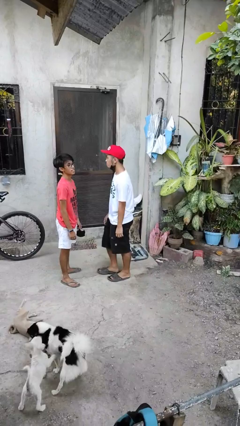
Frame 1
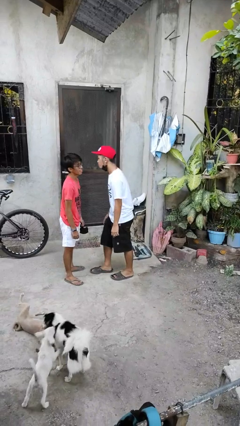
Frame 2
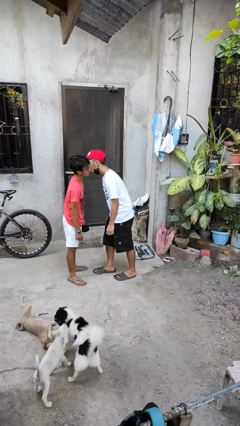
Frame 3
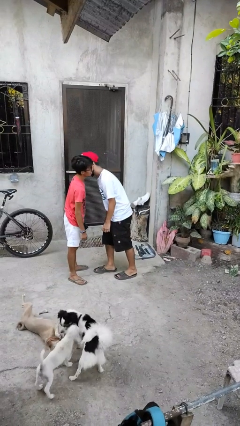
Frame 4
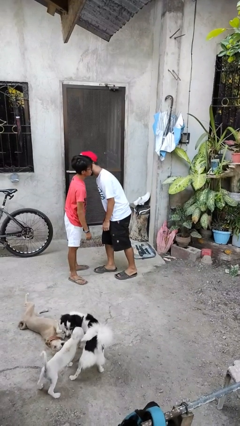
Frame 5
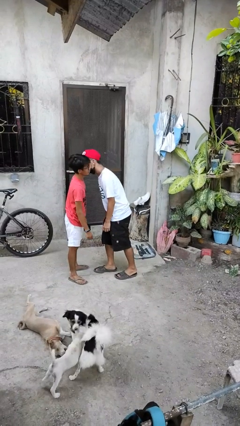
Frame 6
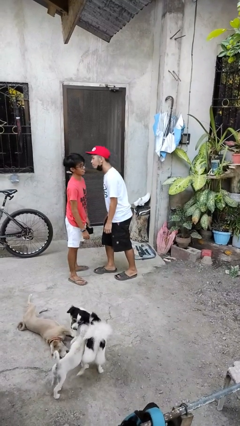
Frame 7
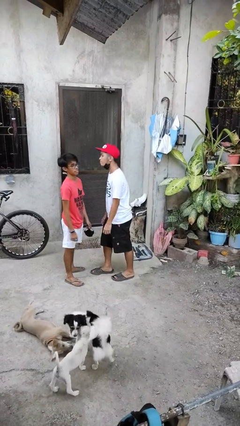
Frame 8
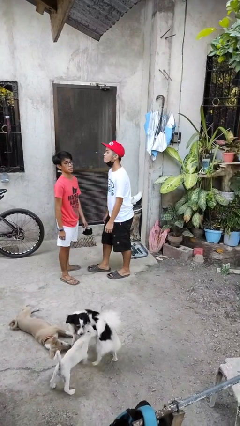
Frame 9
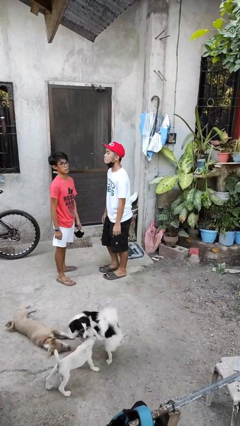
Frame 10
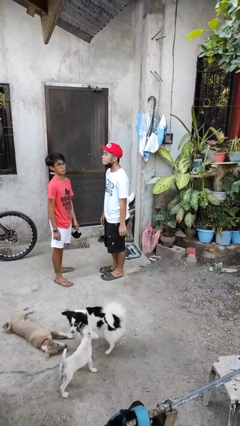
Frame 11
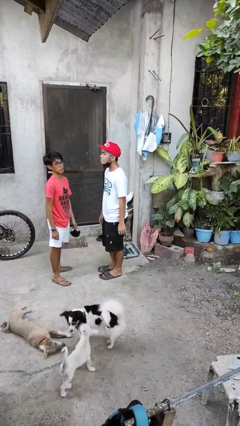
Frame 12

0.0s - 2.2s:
person kisses cheek of person

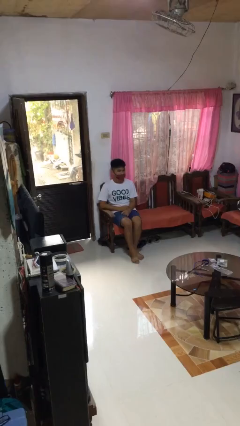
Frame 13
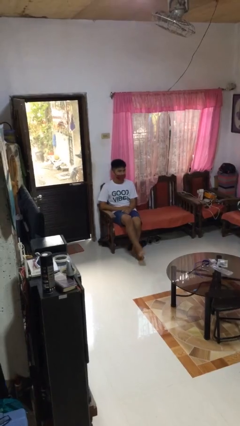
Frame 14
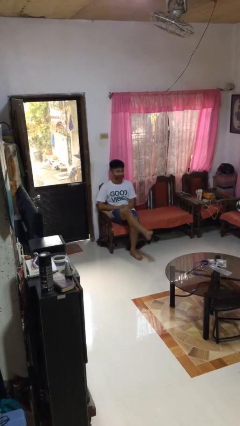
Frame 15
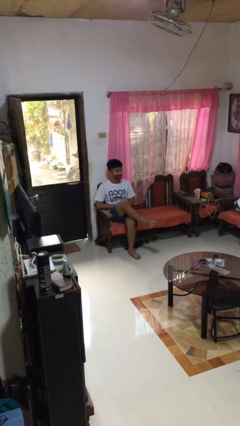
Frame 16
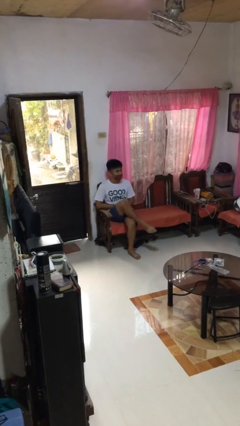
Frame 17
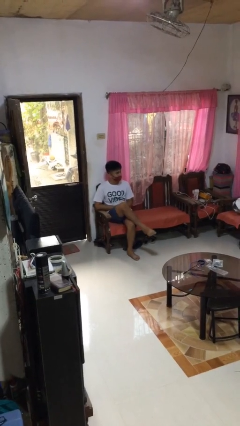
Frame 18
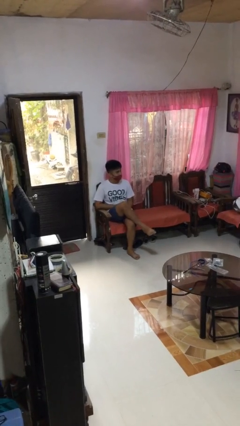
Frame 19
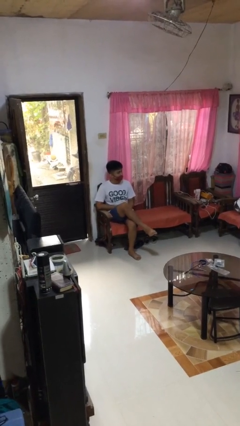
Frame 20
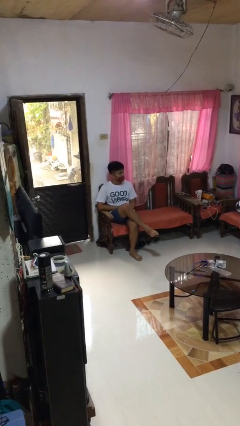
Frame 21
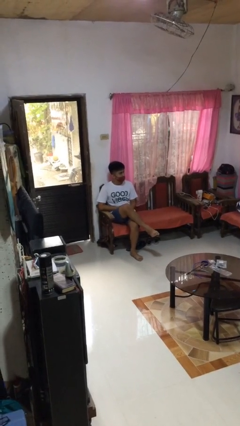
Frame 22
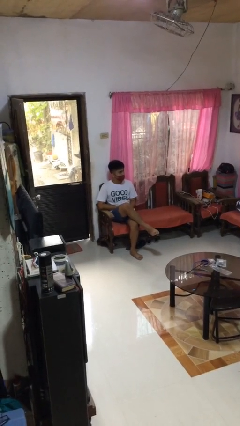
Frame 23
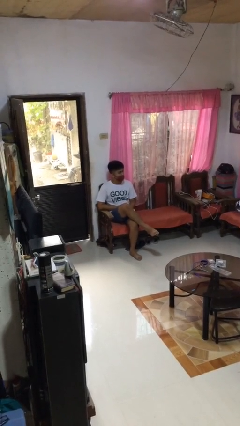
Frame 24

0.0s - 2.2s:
person crosses legs

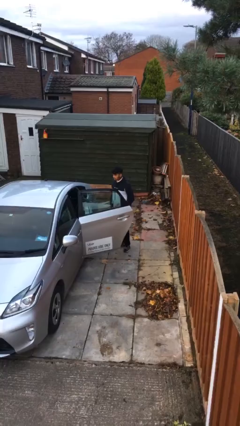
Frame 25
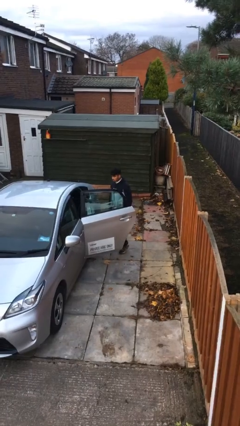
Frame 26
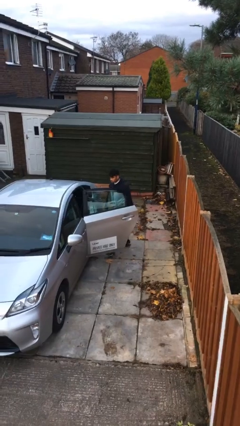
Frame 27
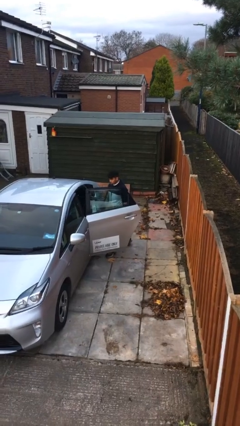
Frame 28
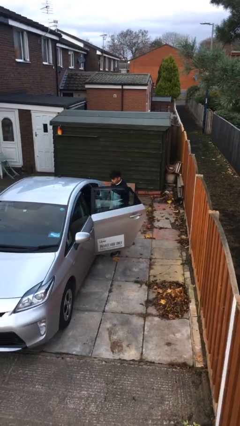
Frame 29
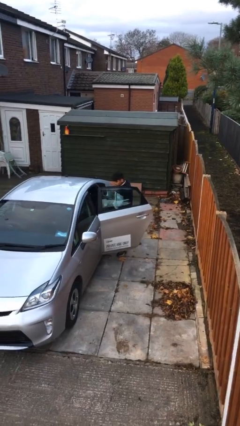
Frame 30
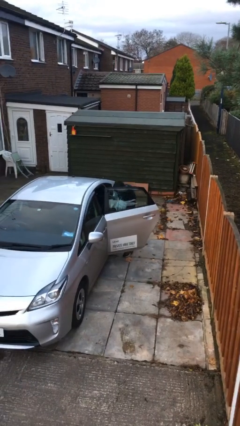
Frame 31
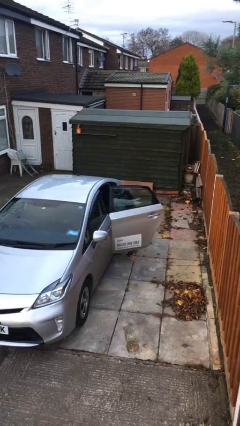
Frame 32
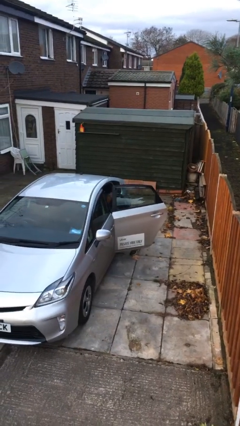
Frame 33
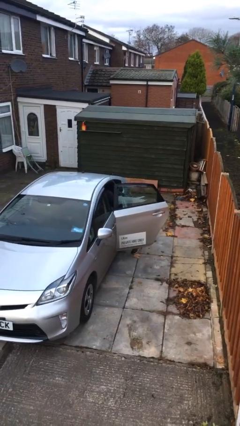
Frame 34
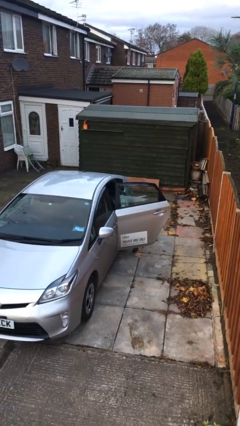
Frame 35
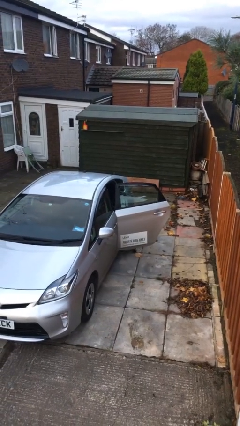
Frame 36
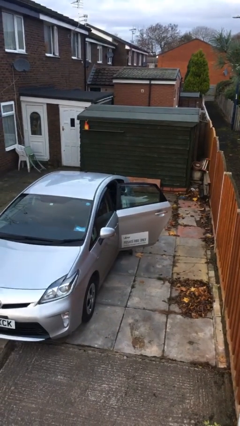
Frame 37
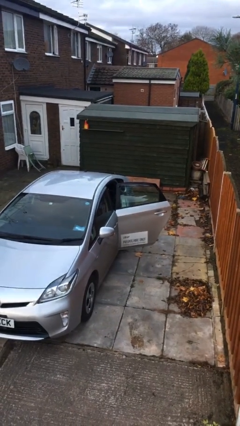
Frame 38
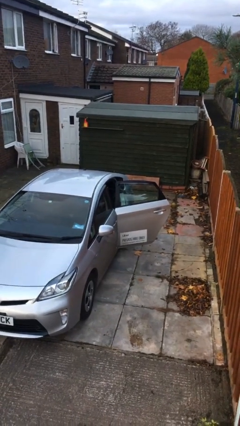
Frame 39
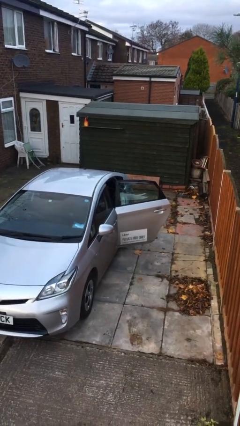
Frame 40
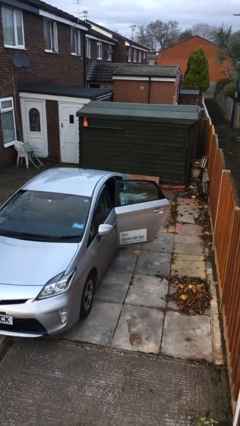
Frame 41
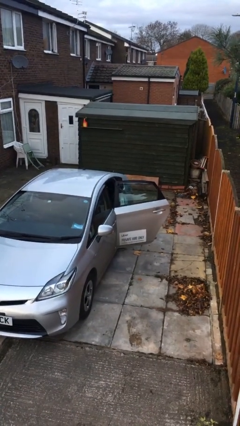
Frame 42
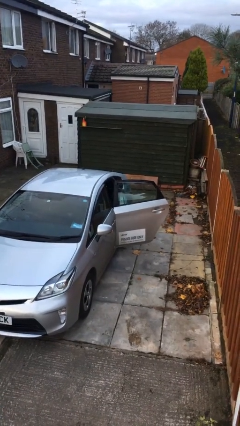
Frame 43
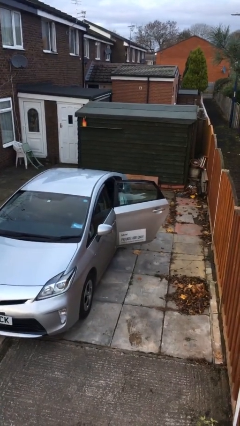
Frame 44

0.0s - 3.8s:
person enters car

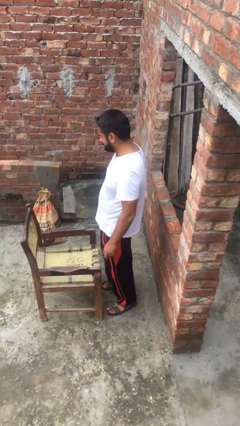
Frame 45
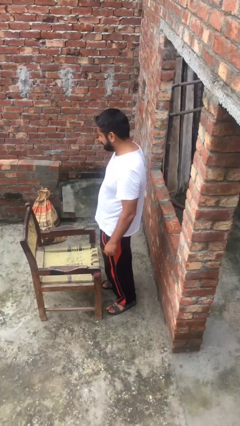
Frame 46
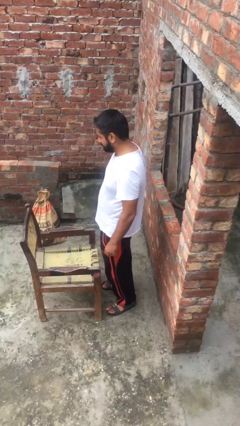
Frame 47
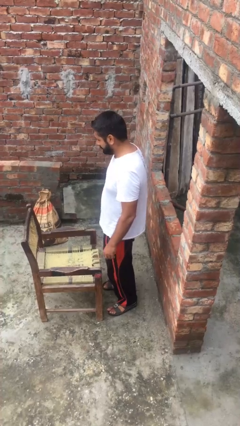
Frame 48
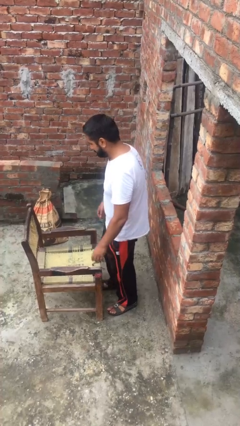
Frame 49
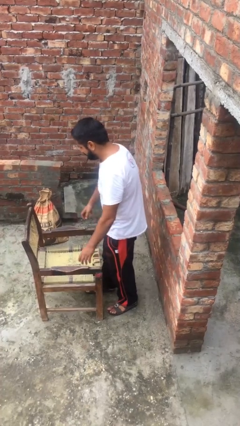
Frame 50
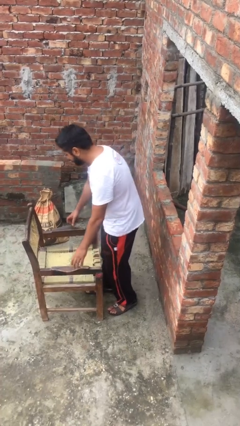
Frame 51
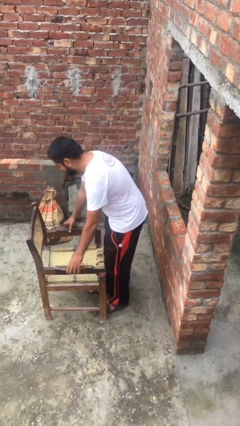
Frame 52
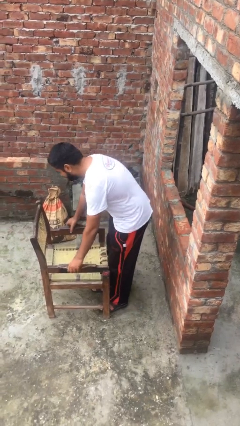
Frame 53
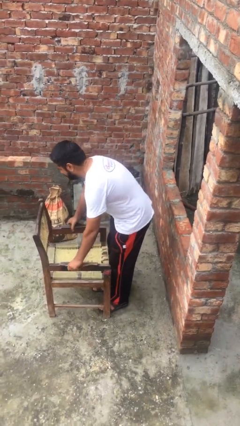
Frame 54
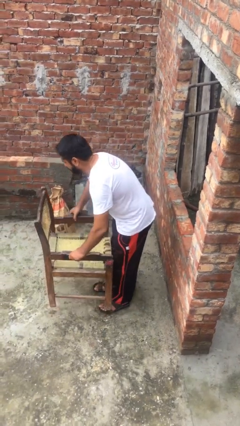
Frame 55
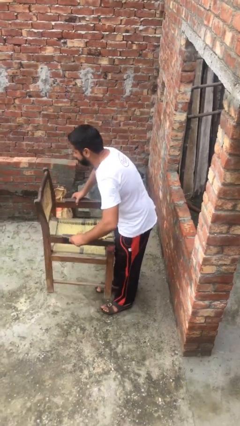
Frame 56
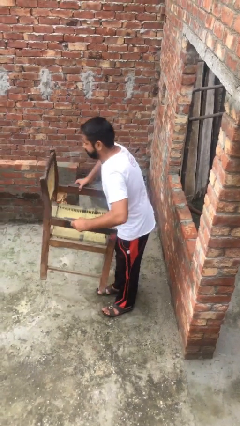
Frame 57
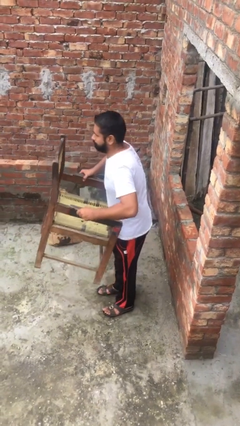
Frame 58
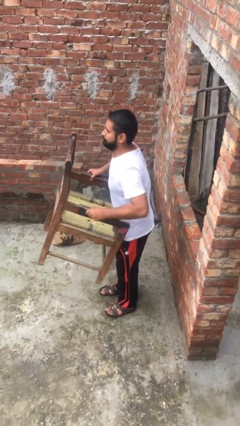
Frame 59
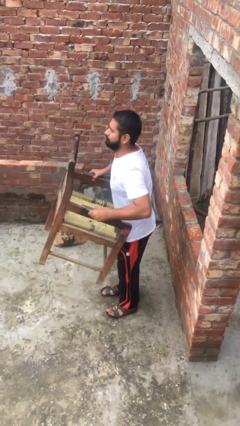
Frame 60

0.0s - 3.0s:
person picks up object from floor

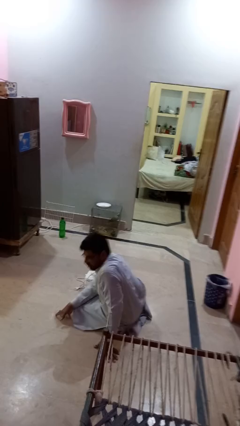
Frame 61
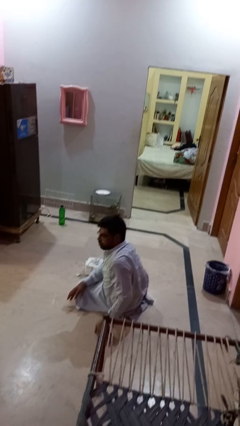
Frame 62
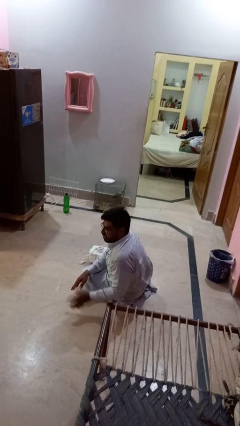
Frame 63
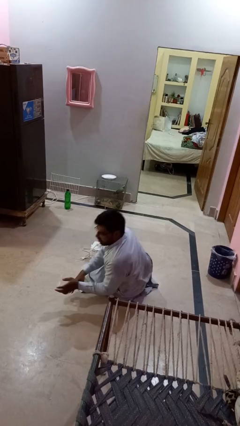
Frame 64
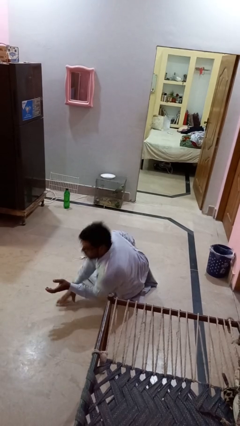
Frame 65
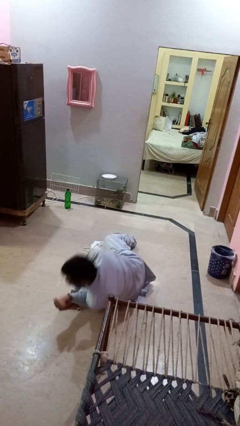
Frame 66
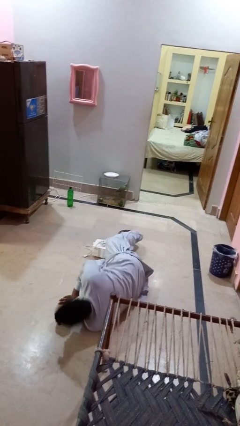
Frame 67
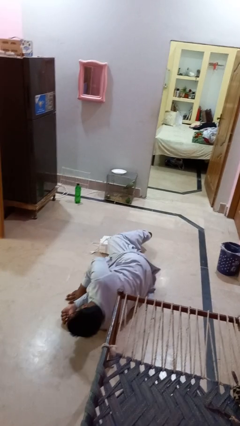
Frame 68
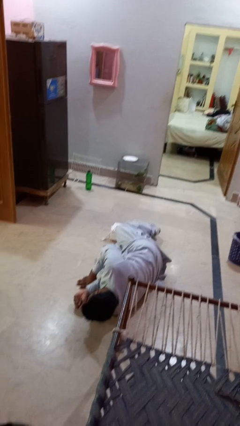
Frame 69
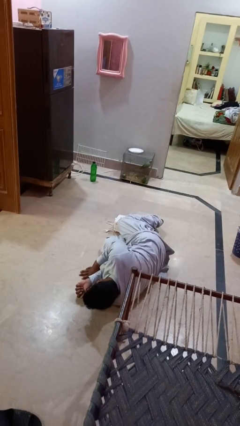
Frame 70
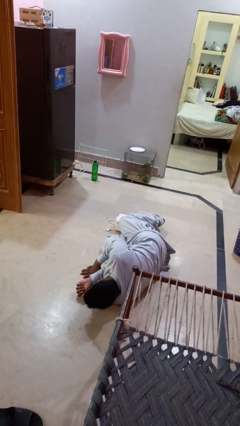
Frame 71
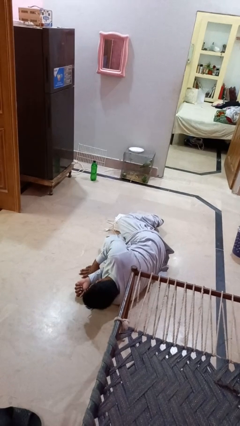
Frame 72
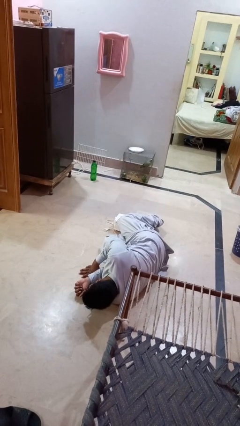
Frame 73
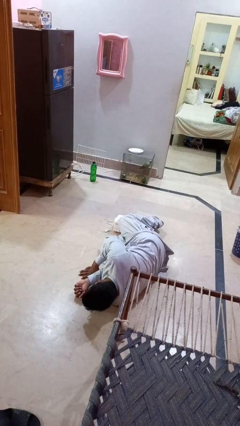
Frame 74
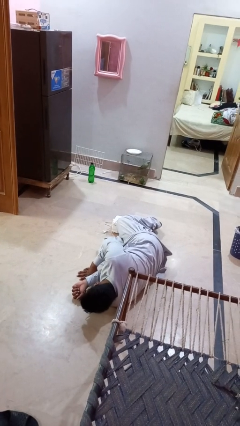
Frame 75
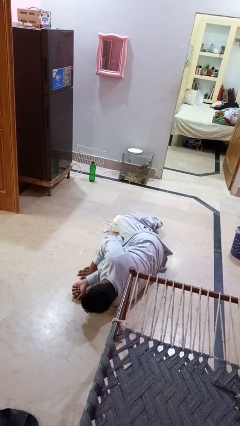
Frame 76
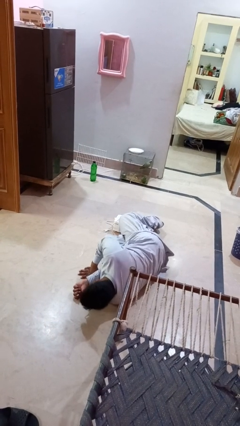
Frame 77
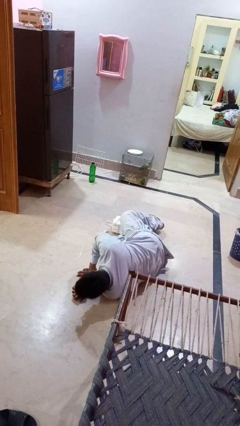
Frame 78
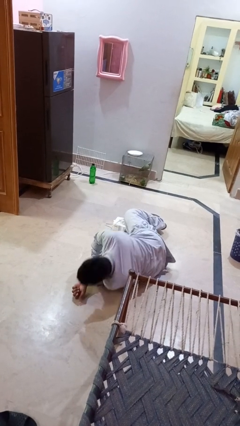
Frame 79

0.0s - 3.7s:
person lies down on floor

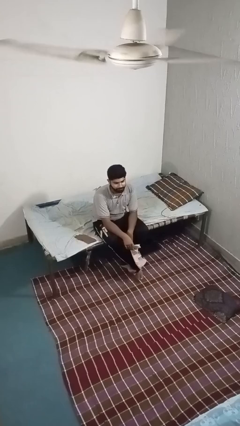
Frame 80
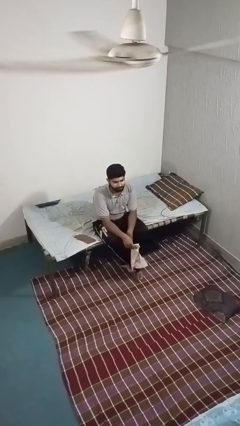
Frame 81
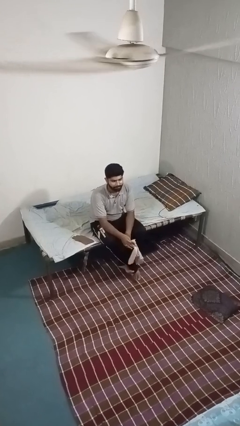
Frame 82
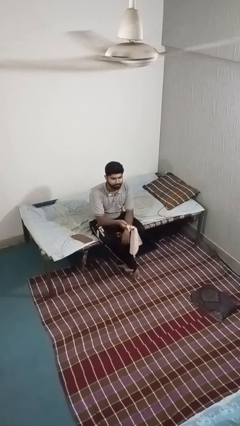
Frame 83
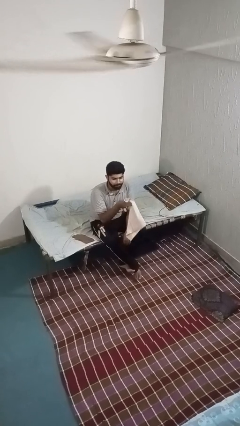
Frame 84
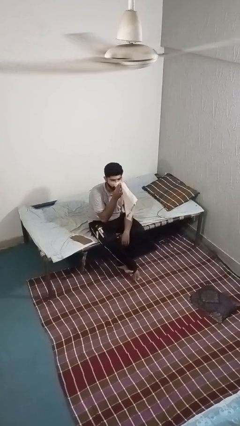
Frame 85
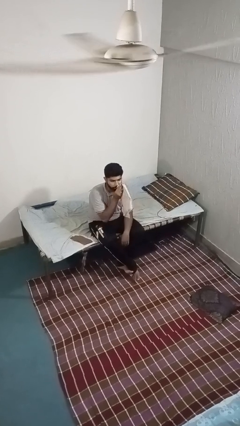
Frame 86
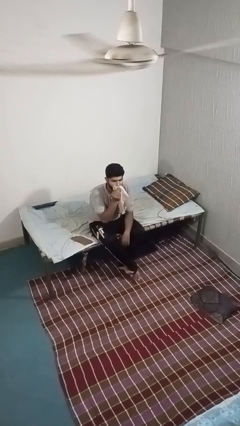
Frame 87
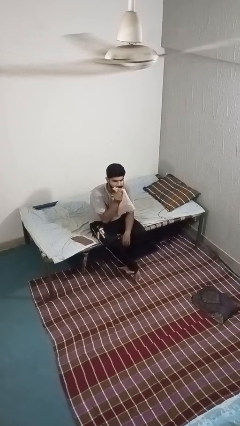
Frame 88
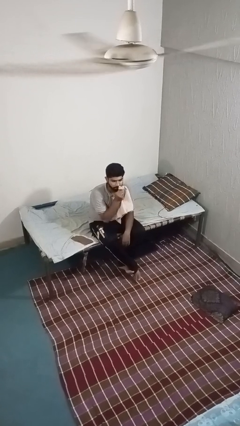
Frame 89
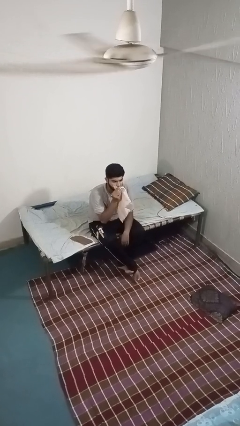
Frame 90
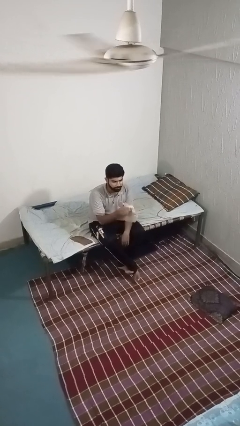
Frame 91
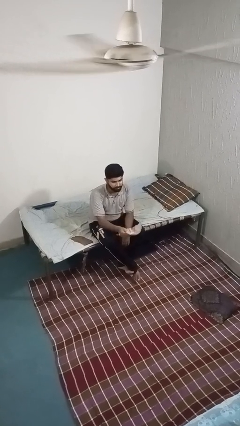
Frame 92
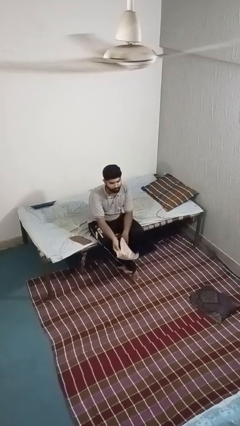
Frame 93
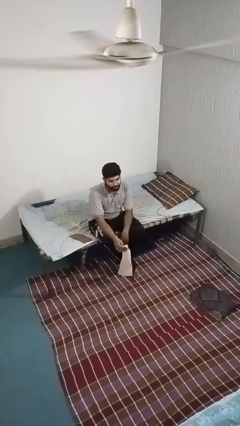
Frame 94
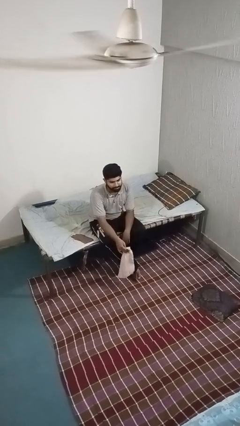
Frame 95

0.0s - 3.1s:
person wipes mouth with napkin
